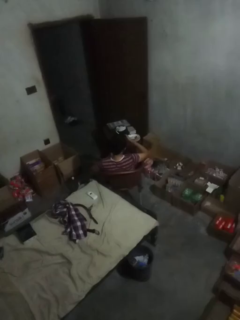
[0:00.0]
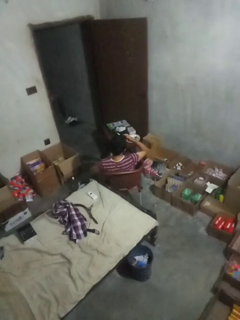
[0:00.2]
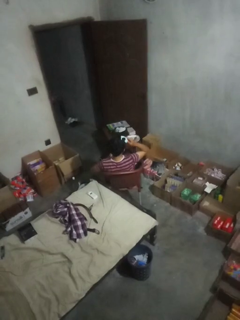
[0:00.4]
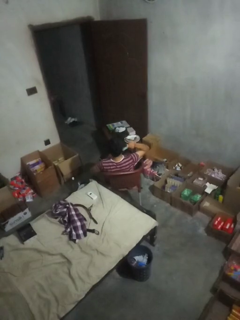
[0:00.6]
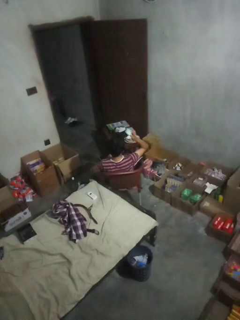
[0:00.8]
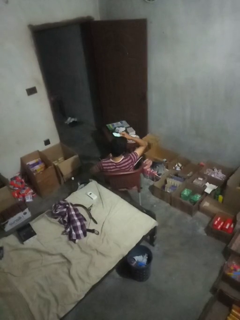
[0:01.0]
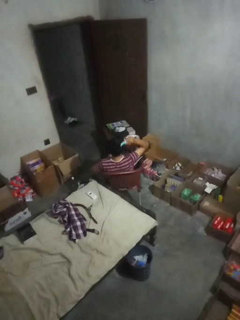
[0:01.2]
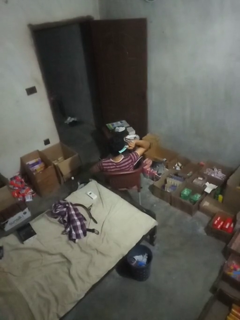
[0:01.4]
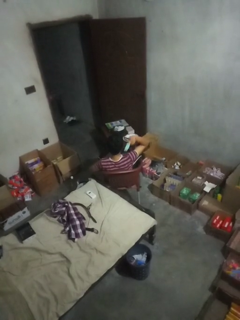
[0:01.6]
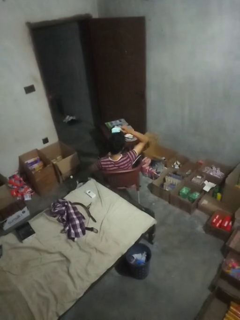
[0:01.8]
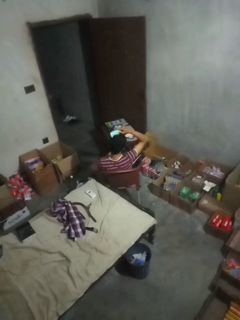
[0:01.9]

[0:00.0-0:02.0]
person brushes hair

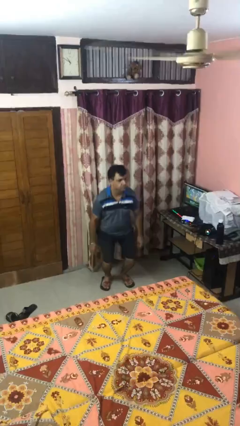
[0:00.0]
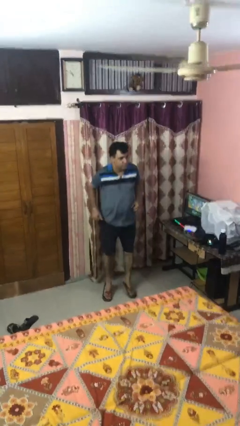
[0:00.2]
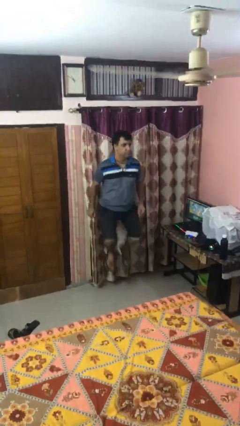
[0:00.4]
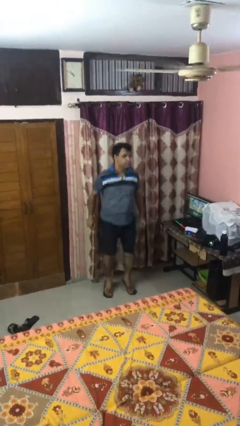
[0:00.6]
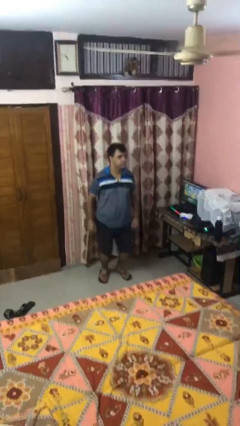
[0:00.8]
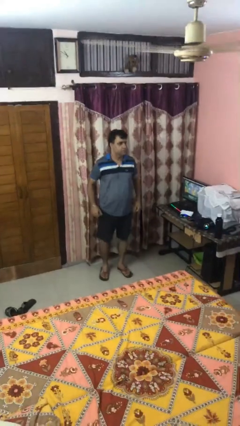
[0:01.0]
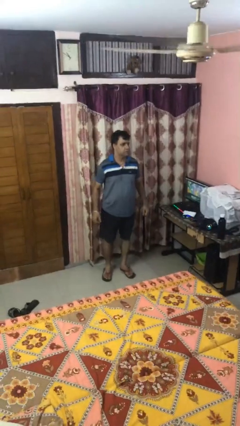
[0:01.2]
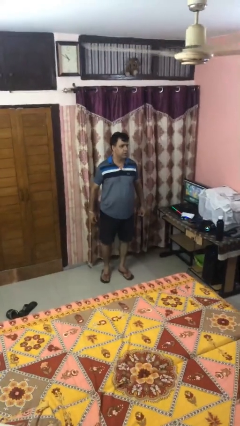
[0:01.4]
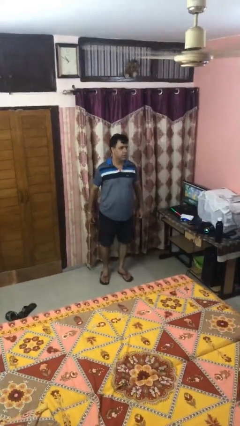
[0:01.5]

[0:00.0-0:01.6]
person jumps

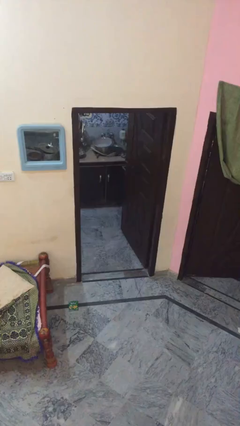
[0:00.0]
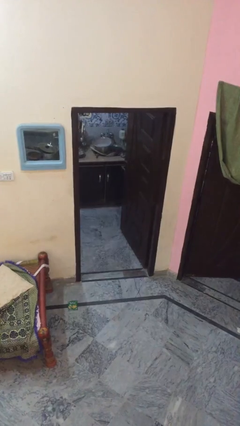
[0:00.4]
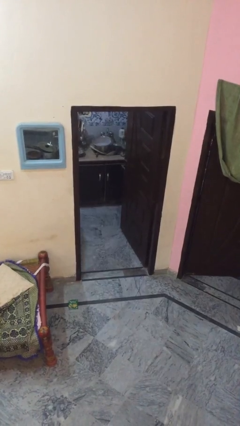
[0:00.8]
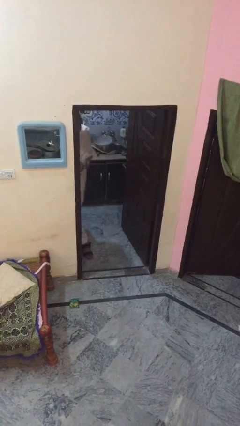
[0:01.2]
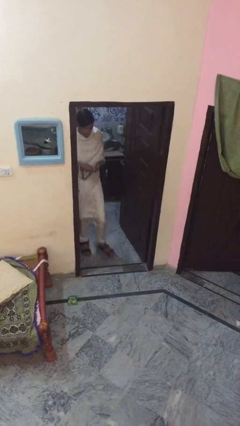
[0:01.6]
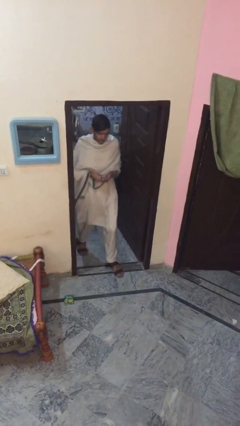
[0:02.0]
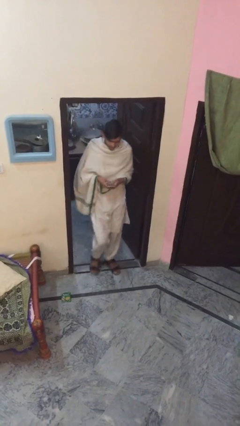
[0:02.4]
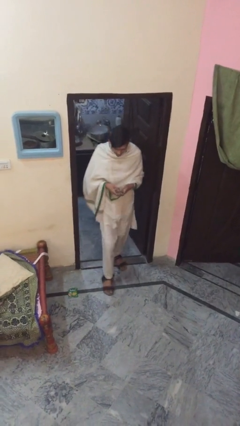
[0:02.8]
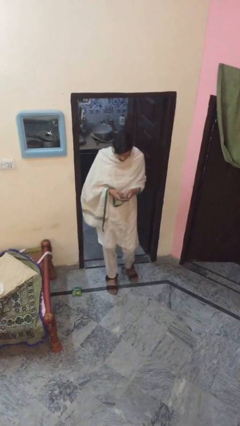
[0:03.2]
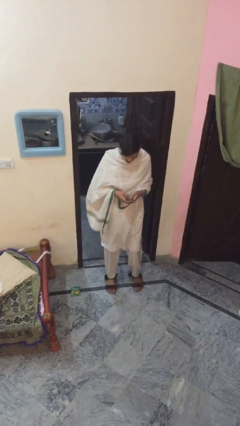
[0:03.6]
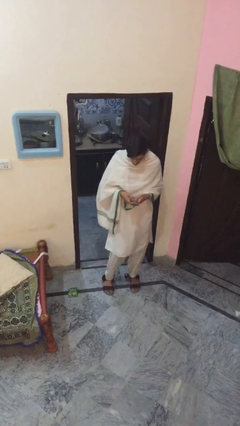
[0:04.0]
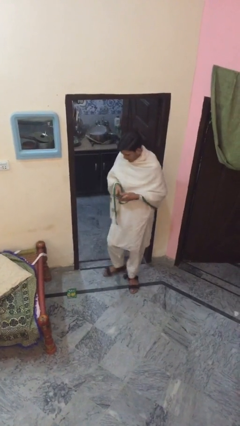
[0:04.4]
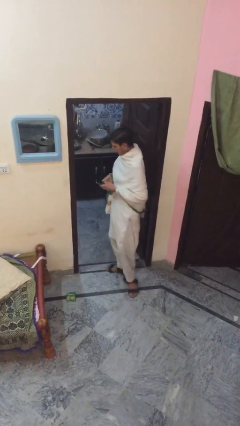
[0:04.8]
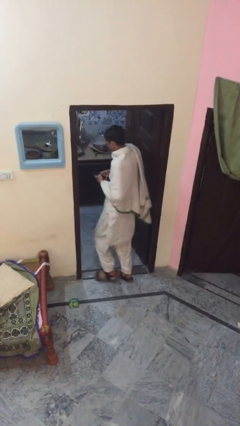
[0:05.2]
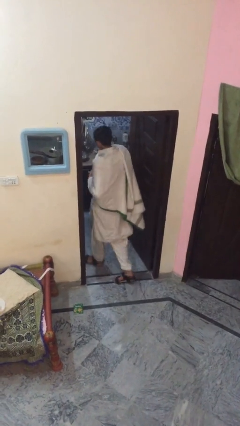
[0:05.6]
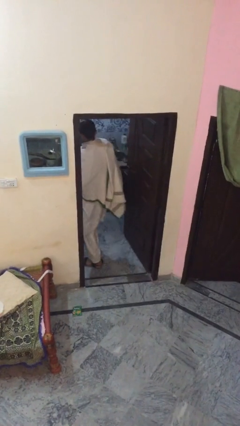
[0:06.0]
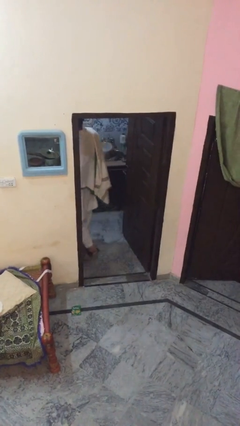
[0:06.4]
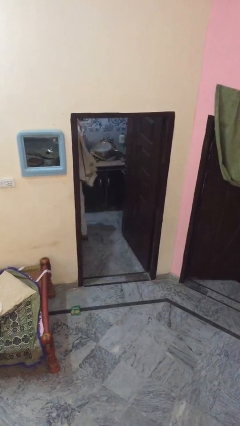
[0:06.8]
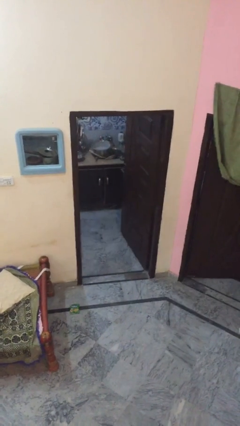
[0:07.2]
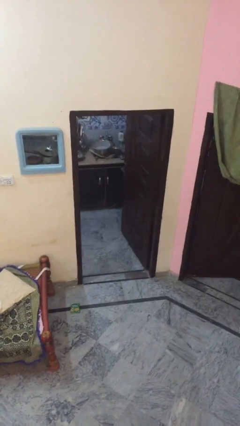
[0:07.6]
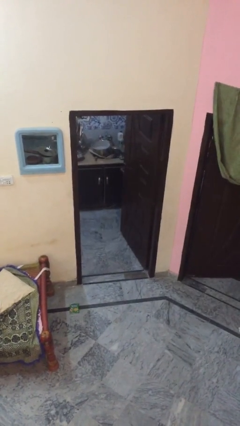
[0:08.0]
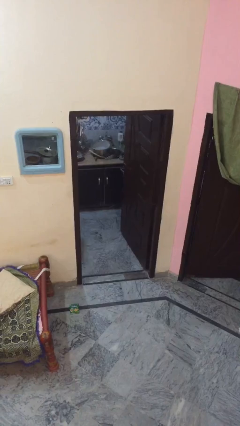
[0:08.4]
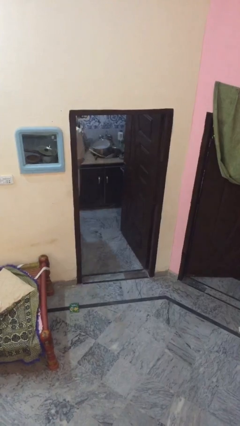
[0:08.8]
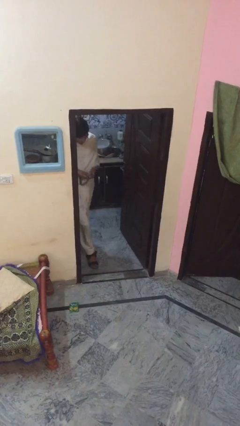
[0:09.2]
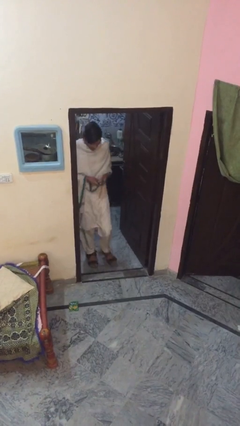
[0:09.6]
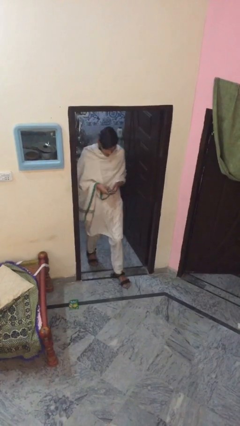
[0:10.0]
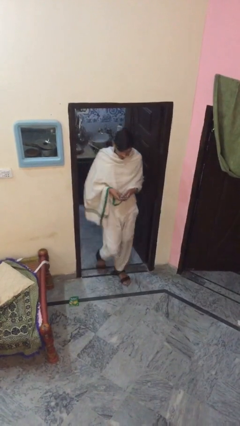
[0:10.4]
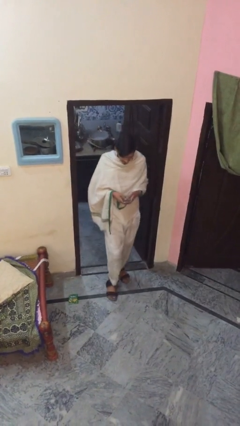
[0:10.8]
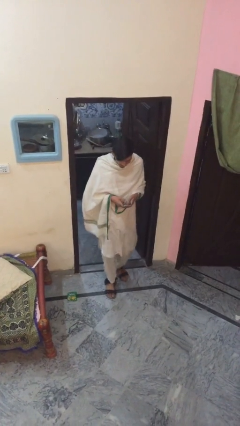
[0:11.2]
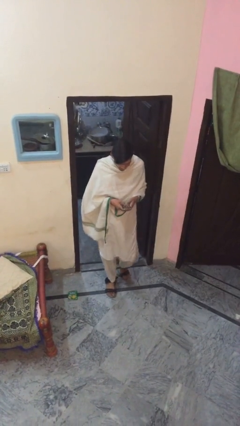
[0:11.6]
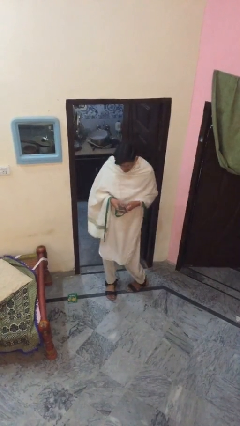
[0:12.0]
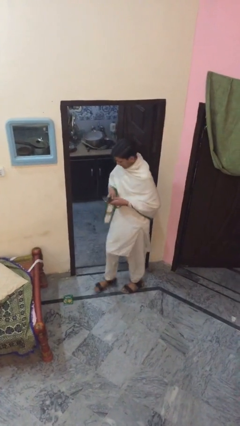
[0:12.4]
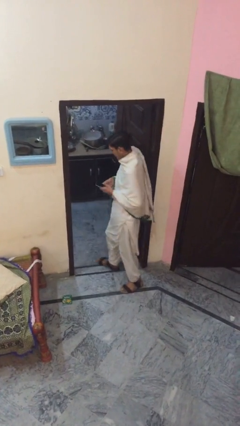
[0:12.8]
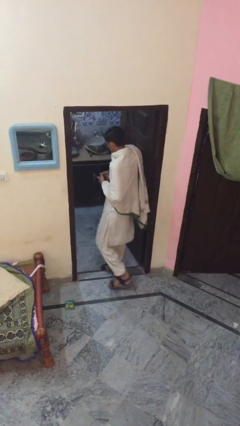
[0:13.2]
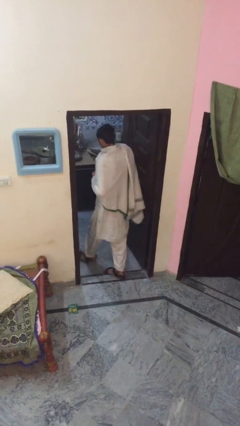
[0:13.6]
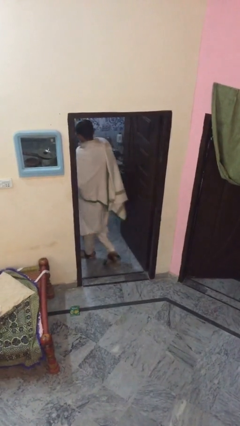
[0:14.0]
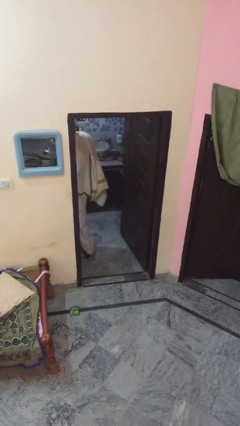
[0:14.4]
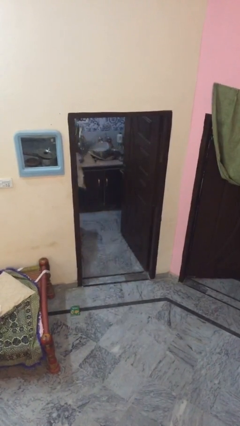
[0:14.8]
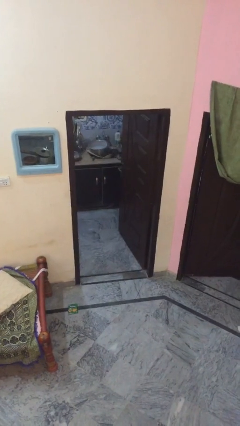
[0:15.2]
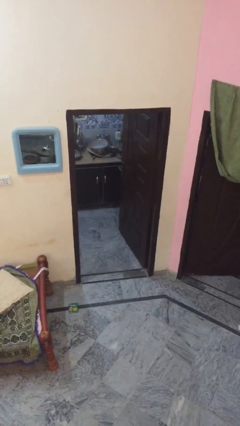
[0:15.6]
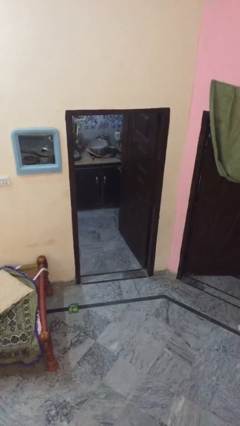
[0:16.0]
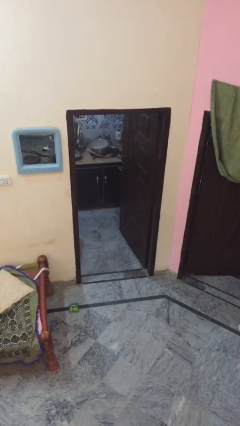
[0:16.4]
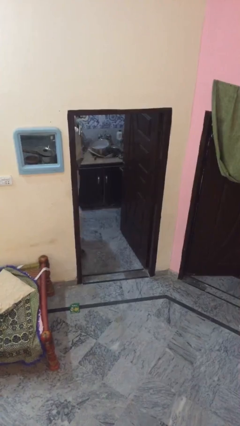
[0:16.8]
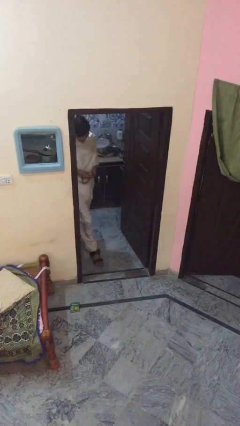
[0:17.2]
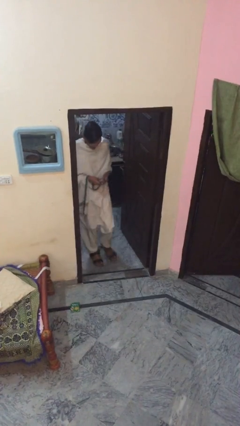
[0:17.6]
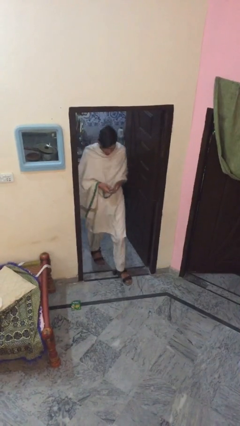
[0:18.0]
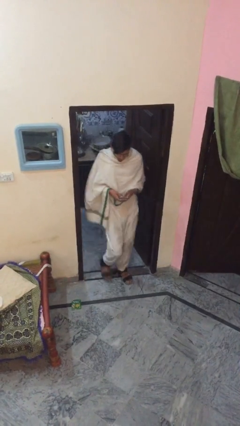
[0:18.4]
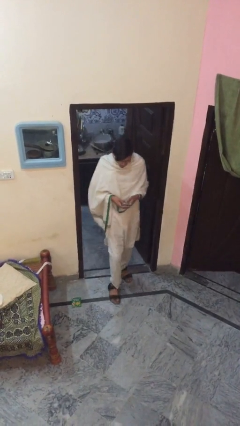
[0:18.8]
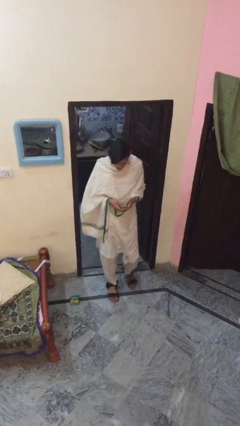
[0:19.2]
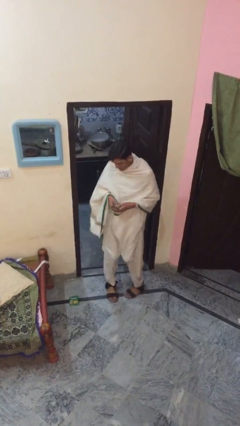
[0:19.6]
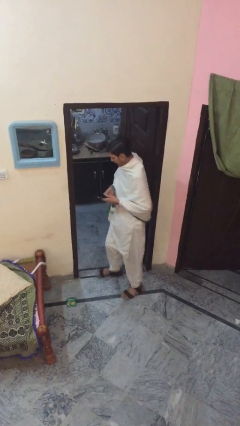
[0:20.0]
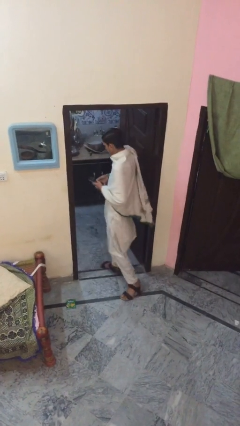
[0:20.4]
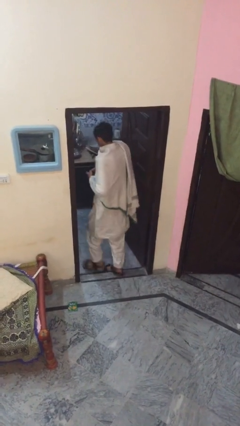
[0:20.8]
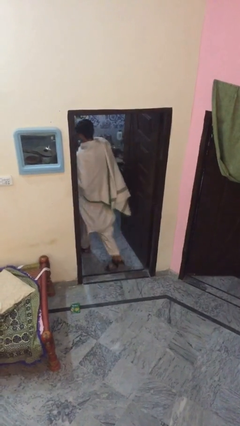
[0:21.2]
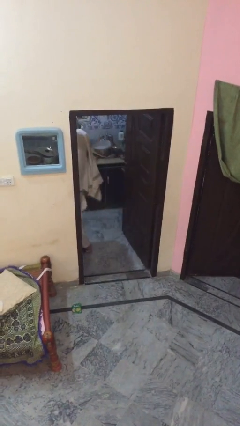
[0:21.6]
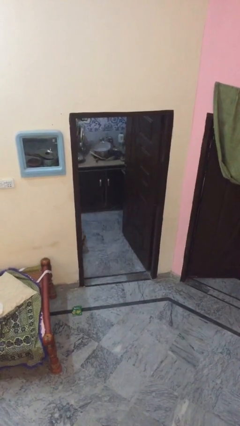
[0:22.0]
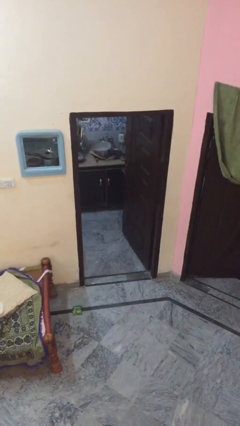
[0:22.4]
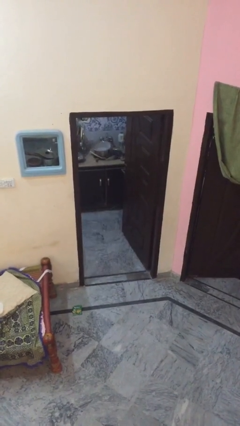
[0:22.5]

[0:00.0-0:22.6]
person texts on phone

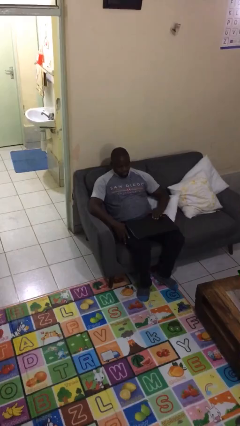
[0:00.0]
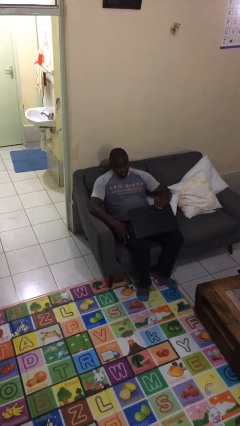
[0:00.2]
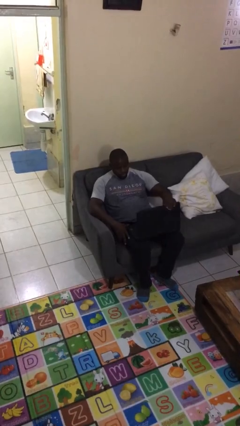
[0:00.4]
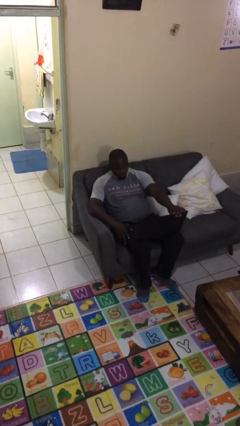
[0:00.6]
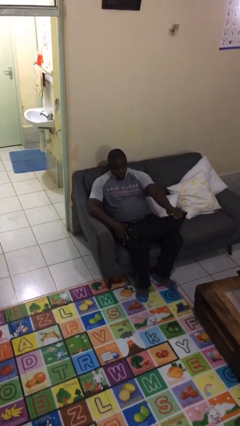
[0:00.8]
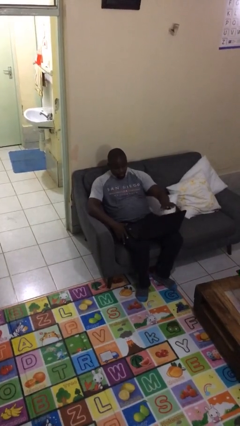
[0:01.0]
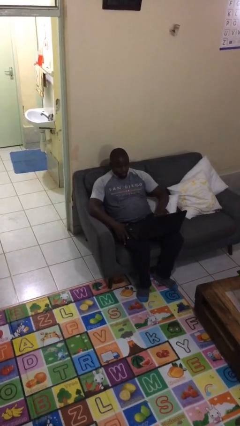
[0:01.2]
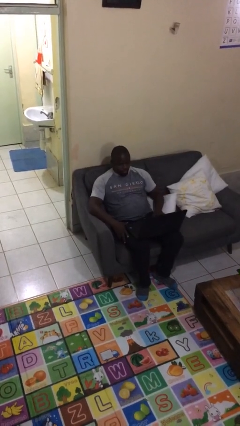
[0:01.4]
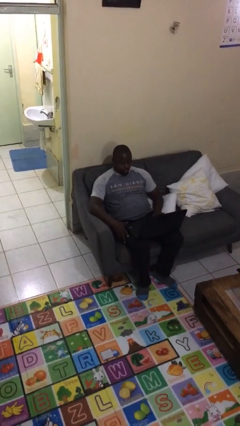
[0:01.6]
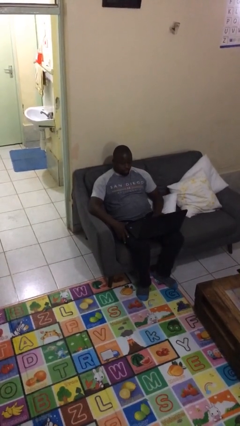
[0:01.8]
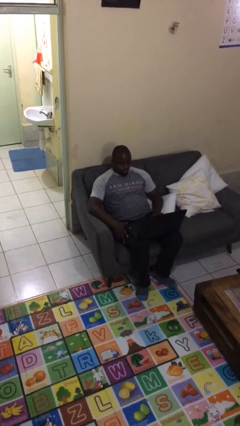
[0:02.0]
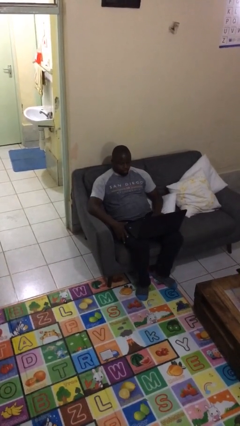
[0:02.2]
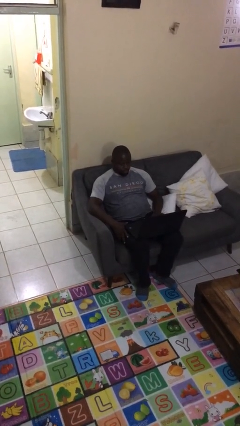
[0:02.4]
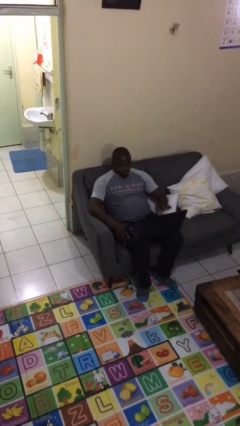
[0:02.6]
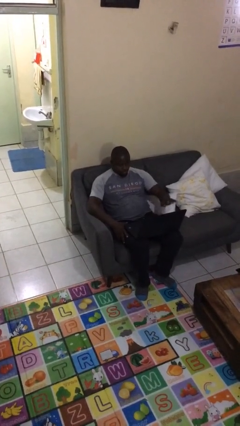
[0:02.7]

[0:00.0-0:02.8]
person opens laptop

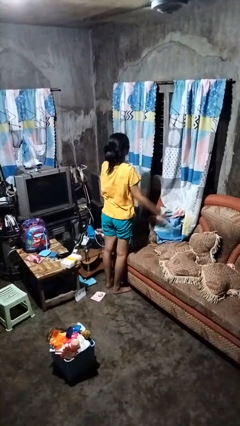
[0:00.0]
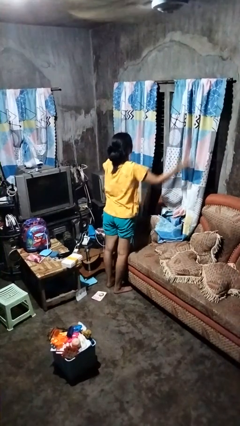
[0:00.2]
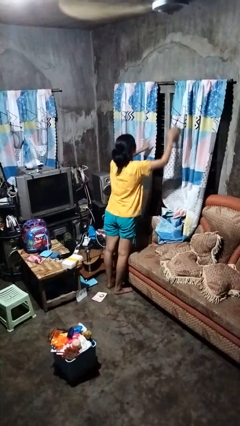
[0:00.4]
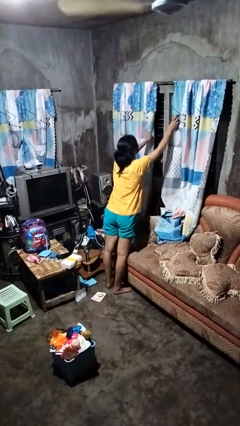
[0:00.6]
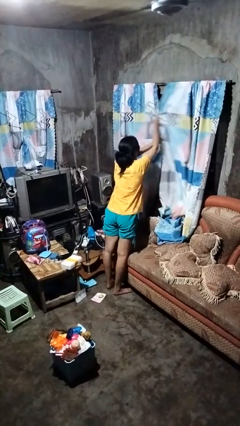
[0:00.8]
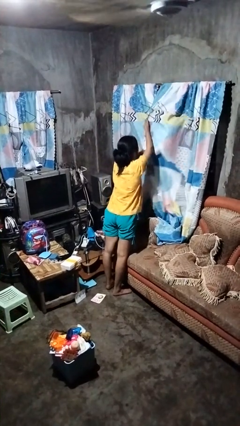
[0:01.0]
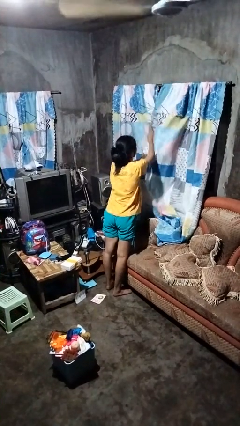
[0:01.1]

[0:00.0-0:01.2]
person closes curtains
